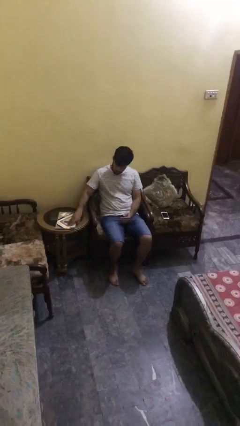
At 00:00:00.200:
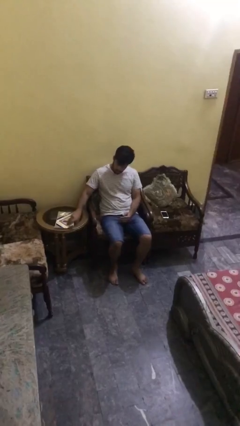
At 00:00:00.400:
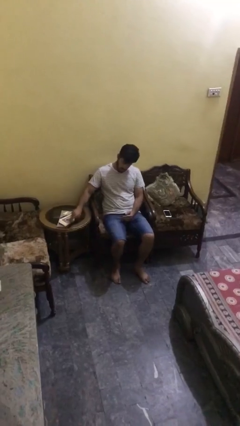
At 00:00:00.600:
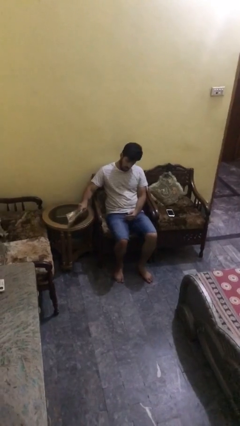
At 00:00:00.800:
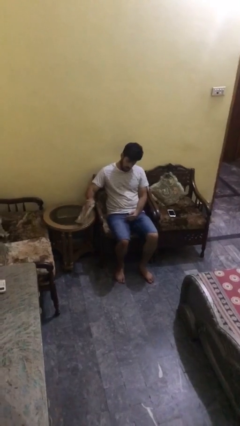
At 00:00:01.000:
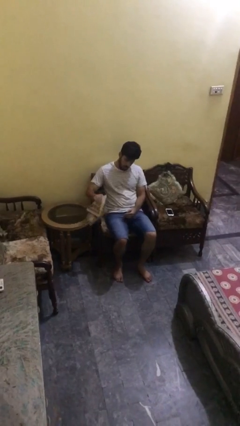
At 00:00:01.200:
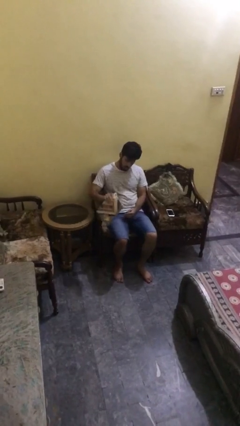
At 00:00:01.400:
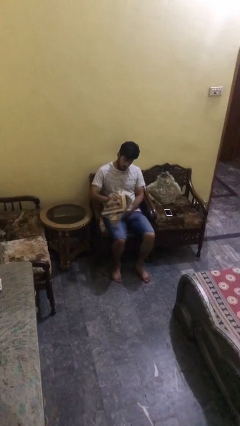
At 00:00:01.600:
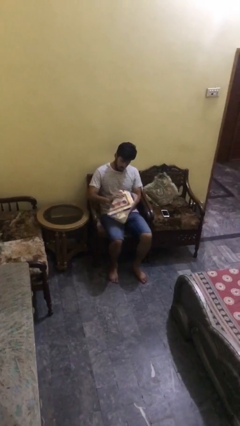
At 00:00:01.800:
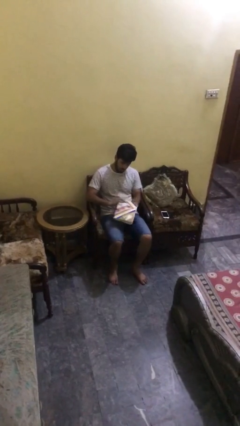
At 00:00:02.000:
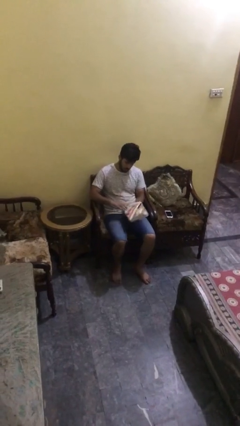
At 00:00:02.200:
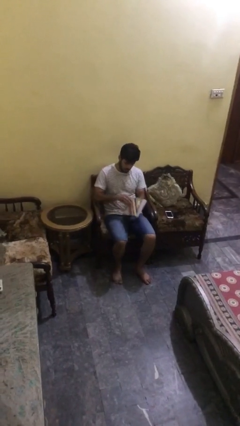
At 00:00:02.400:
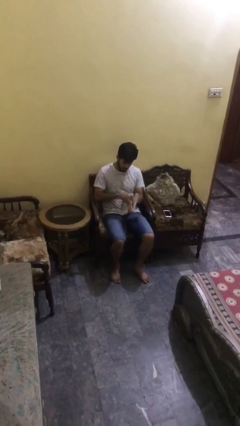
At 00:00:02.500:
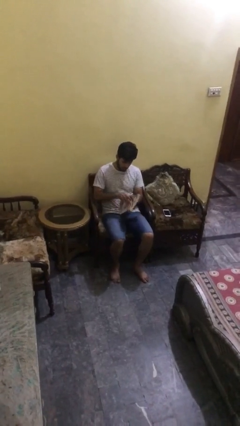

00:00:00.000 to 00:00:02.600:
person picks up object from table

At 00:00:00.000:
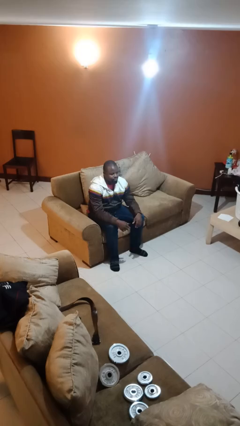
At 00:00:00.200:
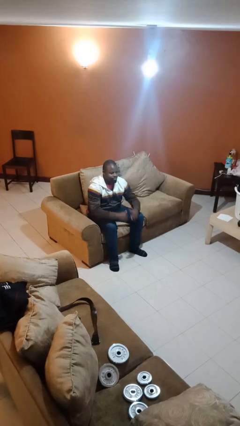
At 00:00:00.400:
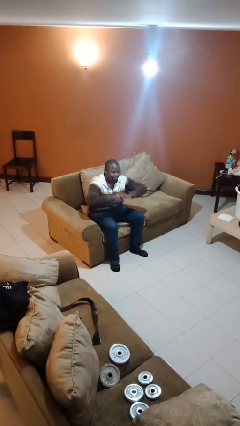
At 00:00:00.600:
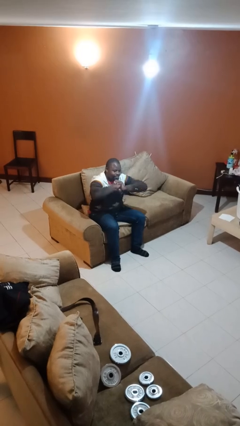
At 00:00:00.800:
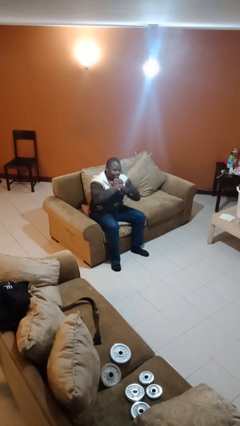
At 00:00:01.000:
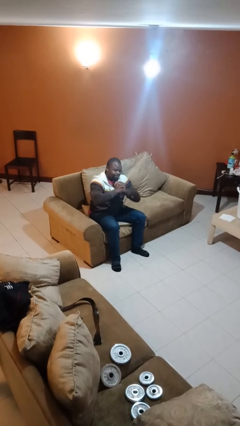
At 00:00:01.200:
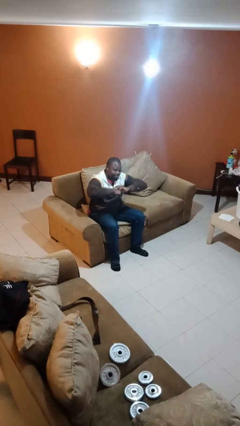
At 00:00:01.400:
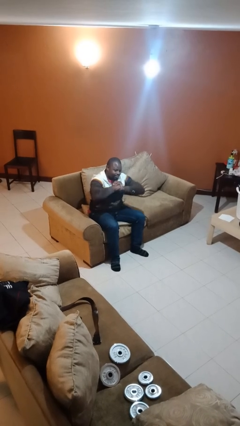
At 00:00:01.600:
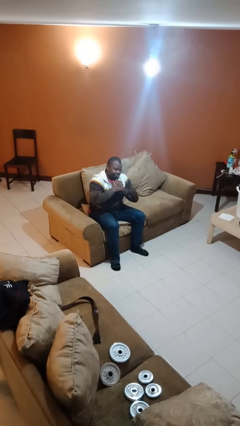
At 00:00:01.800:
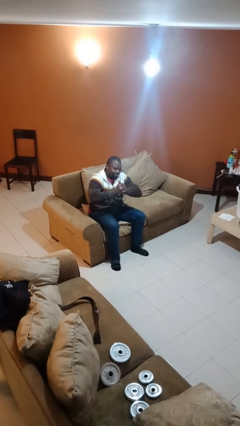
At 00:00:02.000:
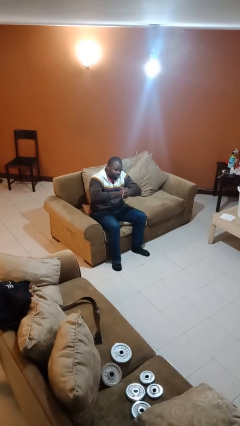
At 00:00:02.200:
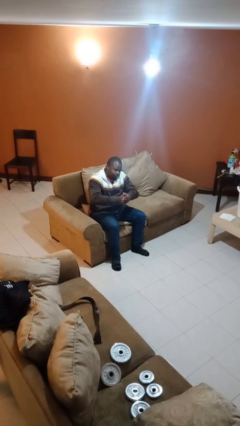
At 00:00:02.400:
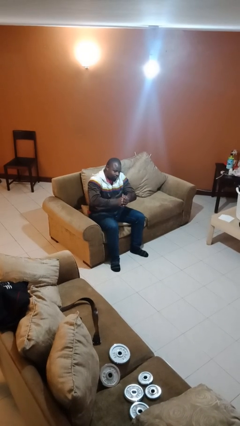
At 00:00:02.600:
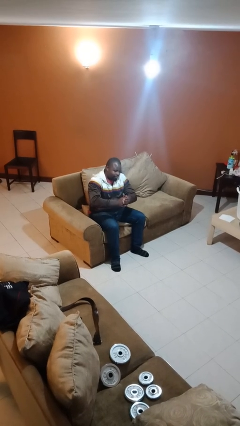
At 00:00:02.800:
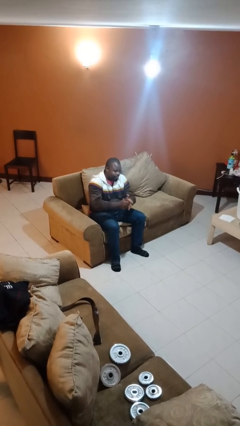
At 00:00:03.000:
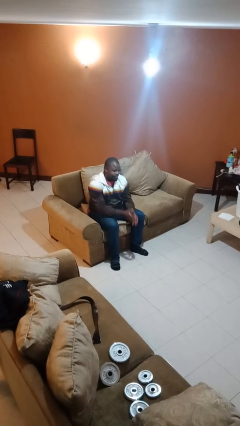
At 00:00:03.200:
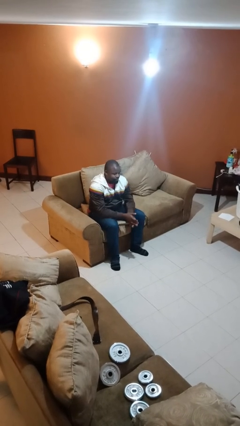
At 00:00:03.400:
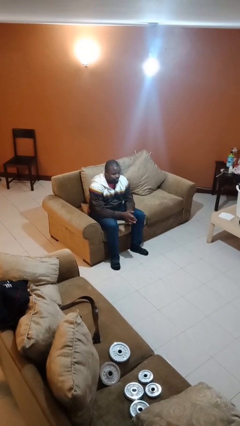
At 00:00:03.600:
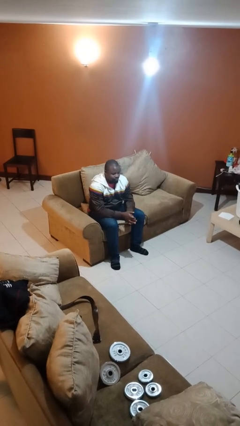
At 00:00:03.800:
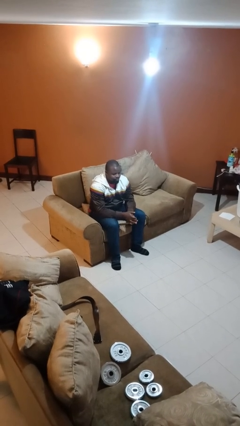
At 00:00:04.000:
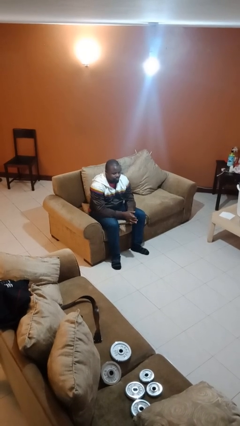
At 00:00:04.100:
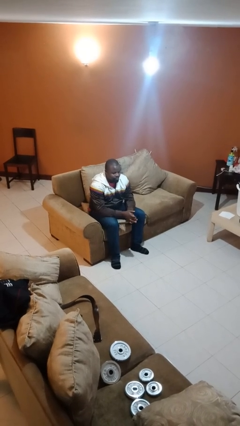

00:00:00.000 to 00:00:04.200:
person cracks knuckles

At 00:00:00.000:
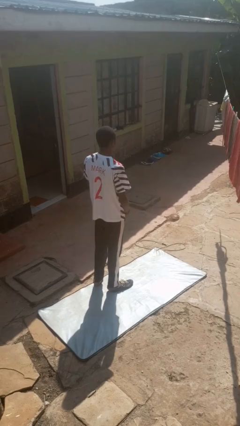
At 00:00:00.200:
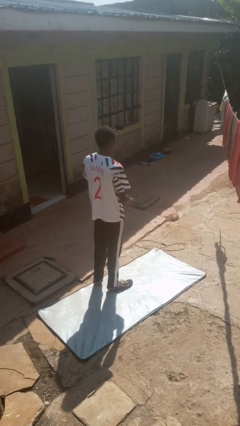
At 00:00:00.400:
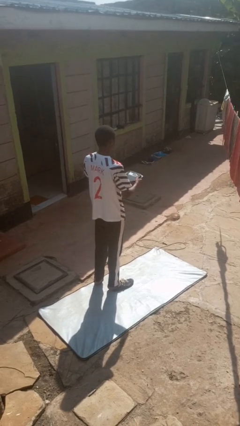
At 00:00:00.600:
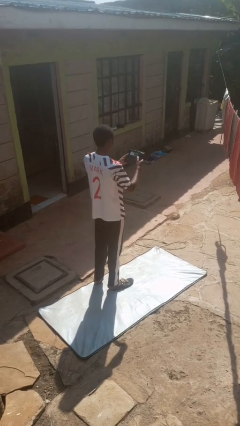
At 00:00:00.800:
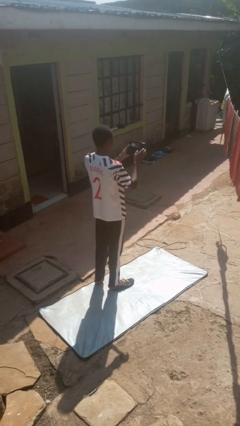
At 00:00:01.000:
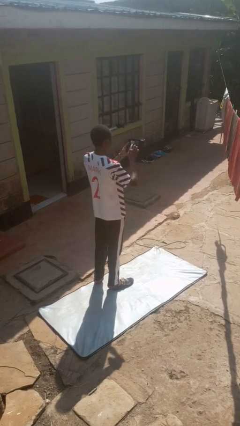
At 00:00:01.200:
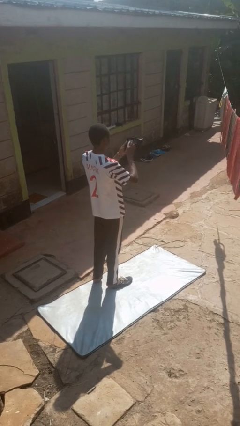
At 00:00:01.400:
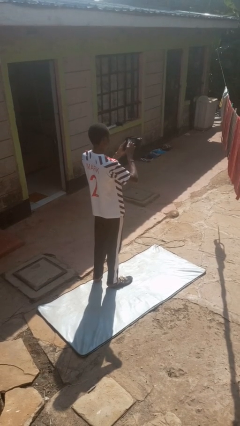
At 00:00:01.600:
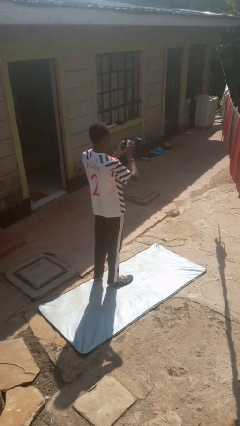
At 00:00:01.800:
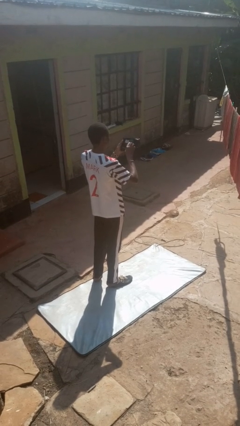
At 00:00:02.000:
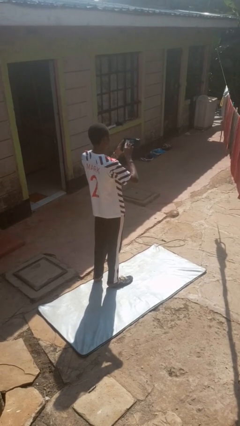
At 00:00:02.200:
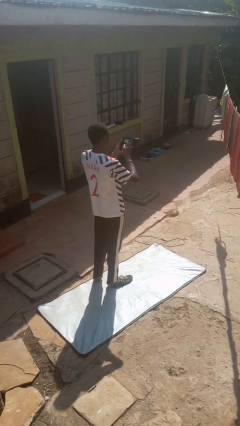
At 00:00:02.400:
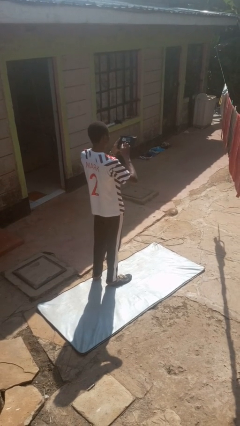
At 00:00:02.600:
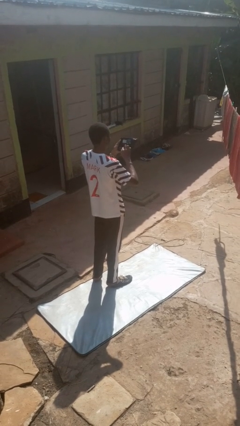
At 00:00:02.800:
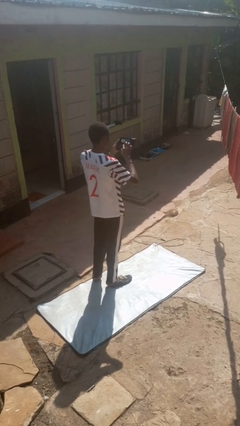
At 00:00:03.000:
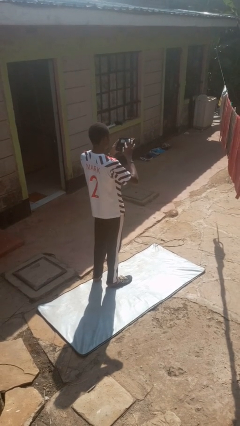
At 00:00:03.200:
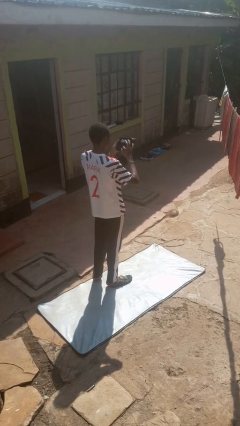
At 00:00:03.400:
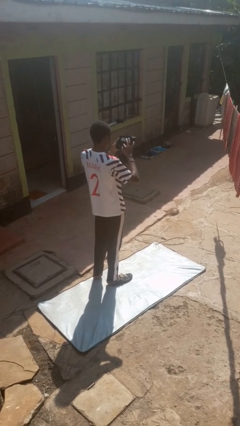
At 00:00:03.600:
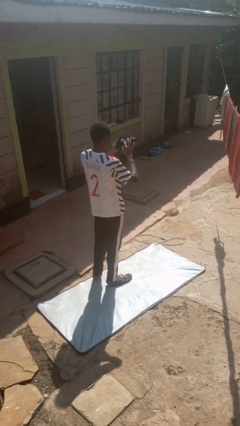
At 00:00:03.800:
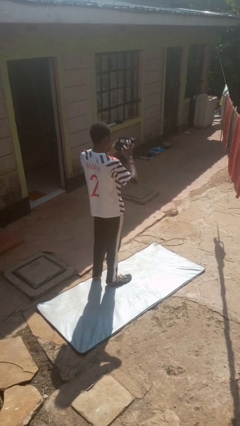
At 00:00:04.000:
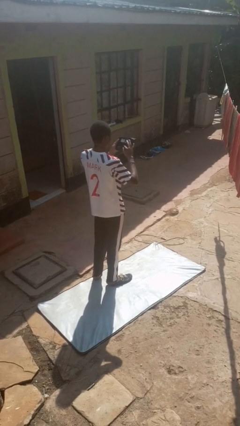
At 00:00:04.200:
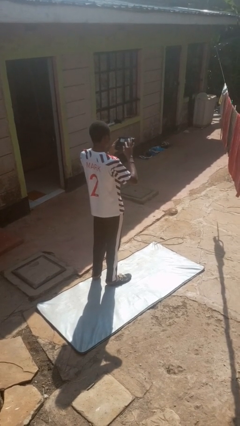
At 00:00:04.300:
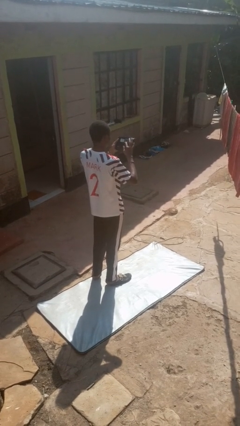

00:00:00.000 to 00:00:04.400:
person interacts with tablet

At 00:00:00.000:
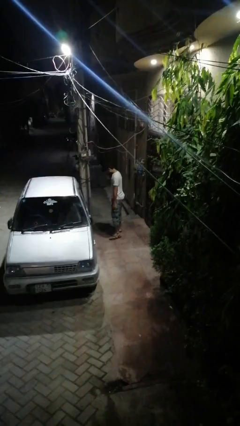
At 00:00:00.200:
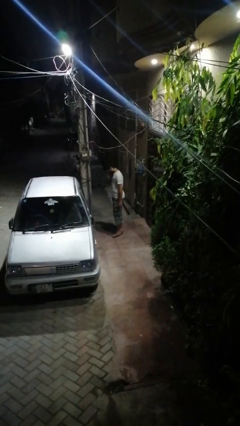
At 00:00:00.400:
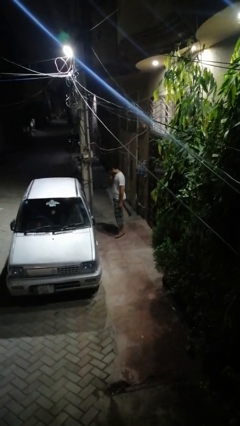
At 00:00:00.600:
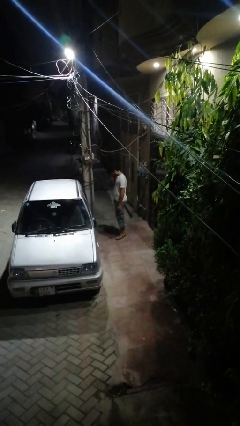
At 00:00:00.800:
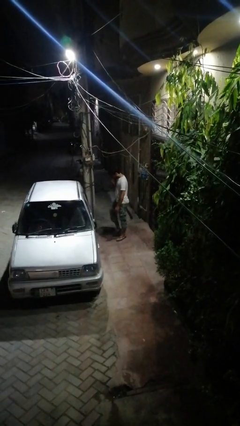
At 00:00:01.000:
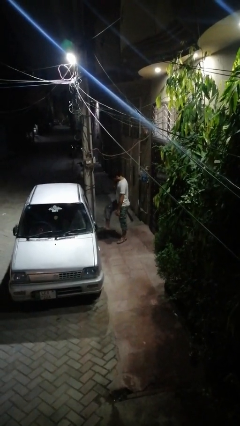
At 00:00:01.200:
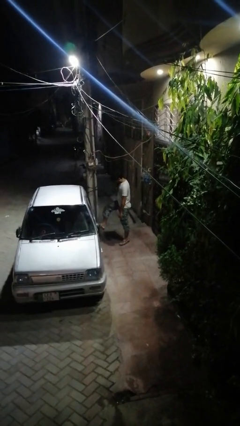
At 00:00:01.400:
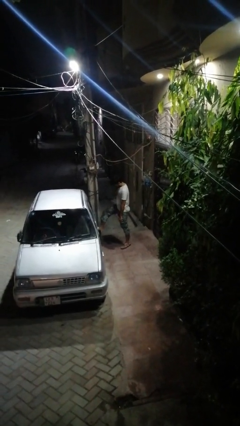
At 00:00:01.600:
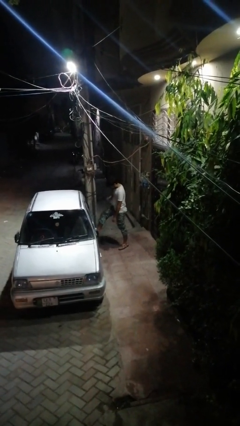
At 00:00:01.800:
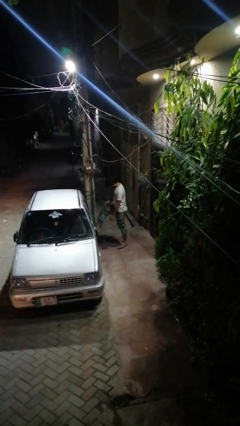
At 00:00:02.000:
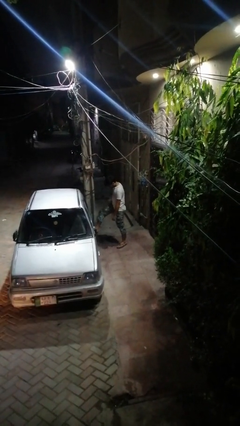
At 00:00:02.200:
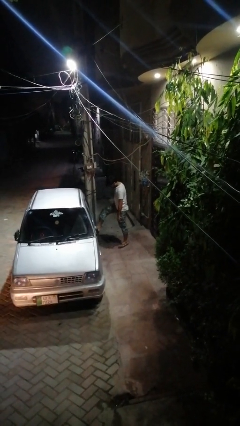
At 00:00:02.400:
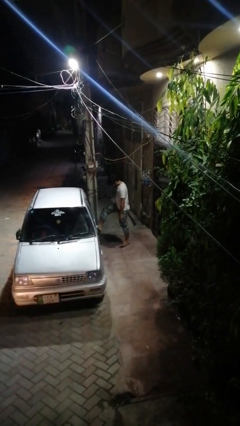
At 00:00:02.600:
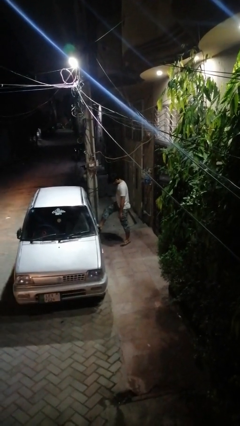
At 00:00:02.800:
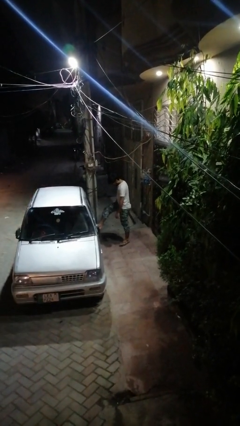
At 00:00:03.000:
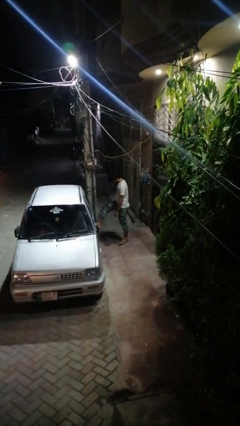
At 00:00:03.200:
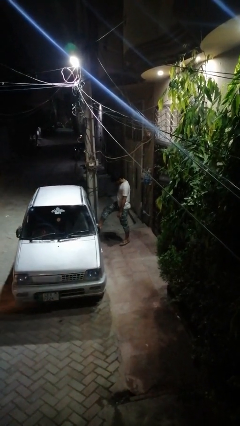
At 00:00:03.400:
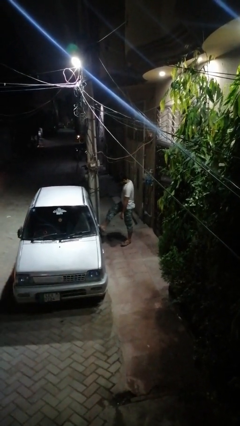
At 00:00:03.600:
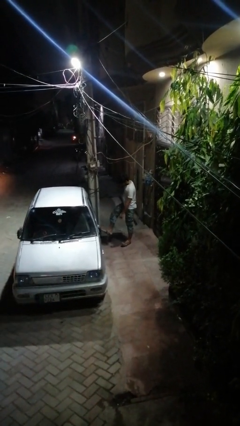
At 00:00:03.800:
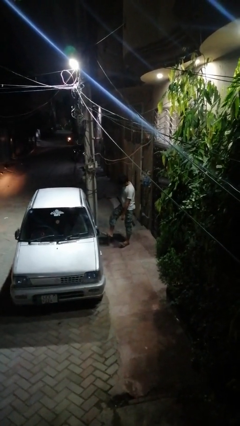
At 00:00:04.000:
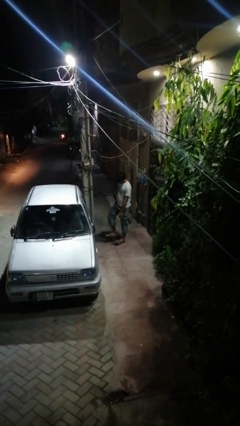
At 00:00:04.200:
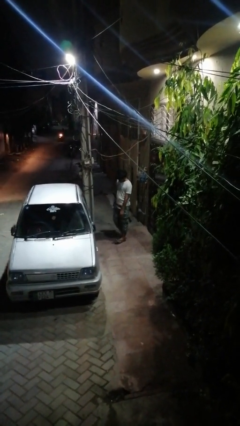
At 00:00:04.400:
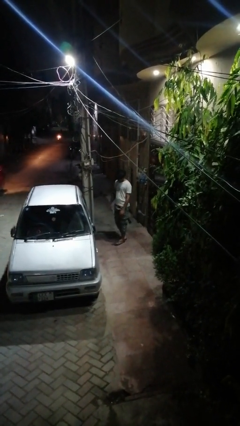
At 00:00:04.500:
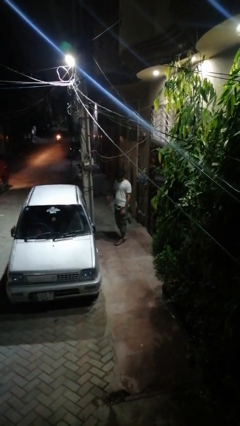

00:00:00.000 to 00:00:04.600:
person kicks car tires

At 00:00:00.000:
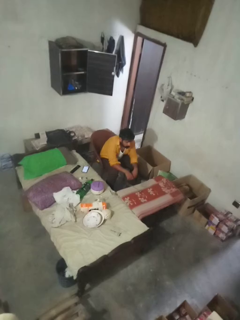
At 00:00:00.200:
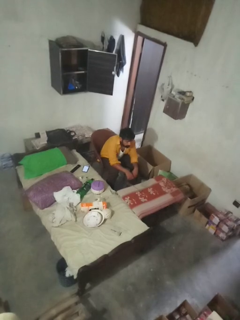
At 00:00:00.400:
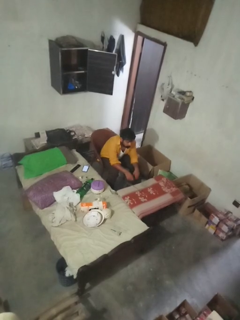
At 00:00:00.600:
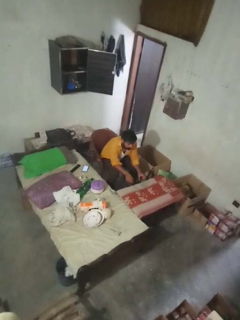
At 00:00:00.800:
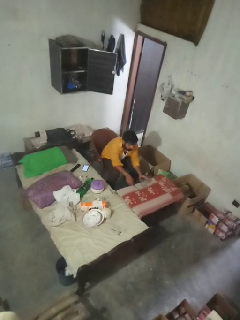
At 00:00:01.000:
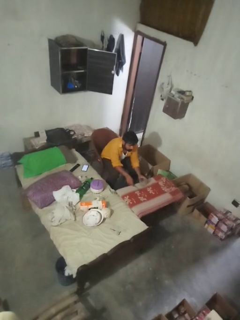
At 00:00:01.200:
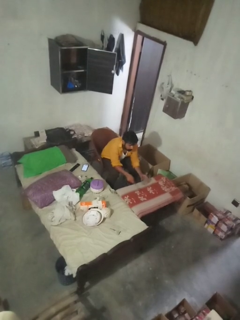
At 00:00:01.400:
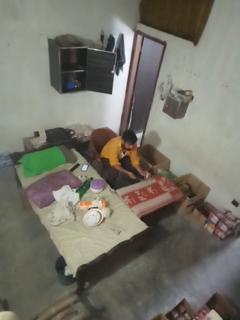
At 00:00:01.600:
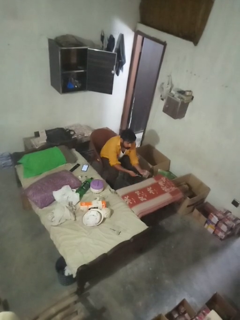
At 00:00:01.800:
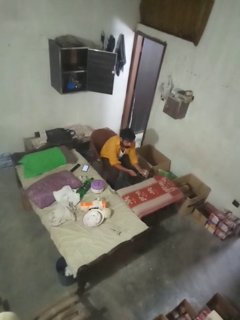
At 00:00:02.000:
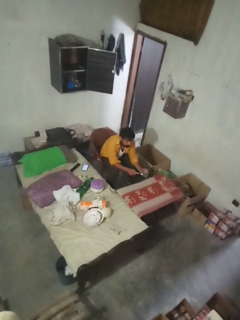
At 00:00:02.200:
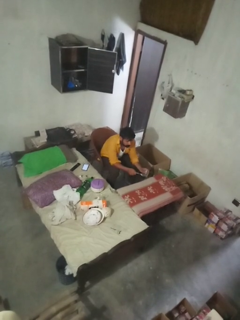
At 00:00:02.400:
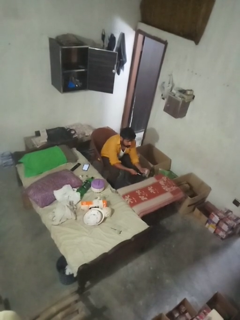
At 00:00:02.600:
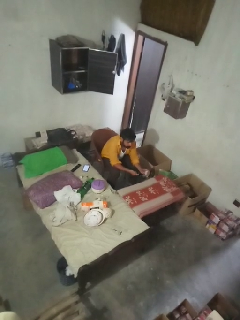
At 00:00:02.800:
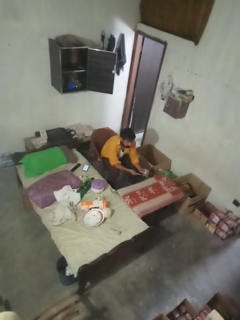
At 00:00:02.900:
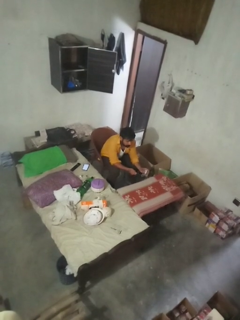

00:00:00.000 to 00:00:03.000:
person knocks over glass
